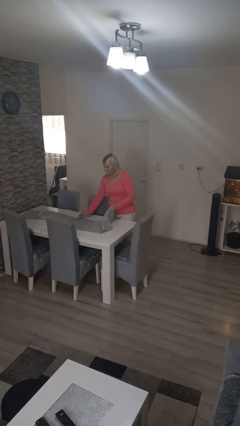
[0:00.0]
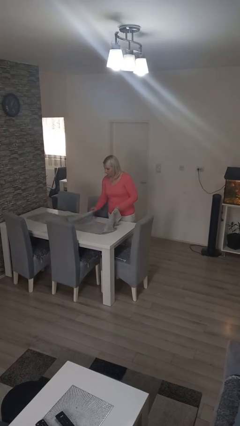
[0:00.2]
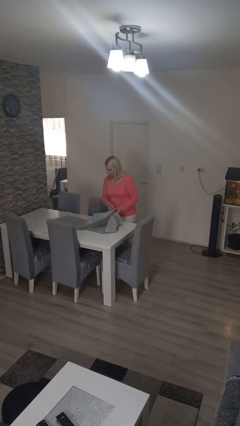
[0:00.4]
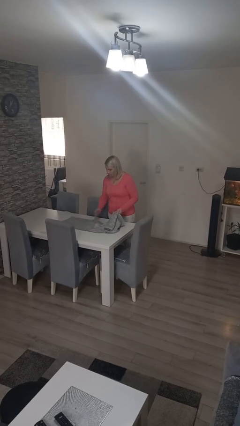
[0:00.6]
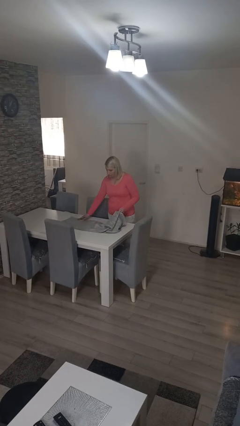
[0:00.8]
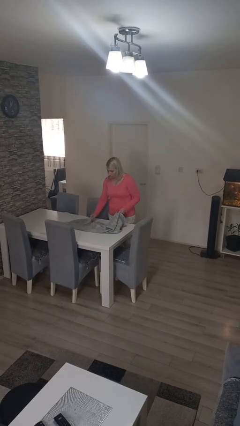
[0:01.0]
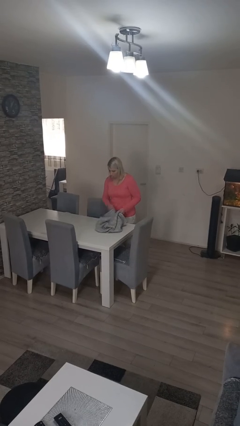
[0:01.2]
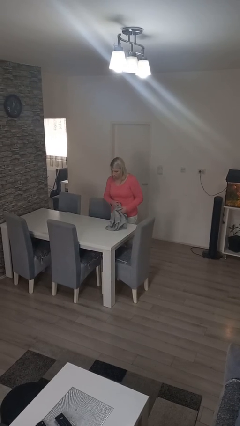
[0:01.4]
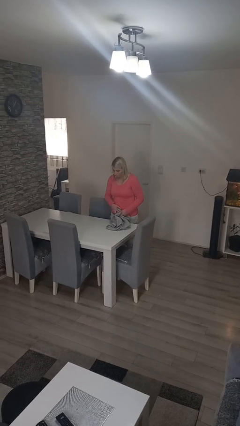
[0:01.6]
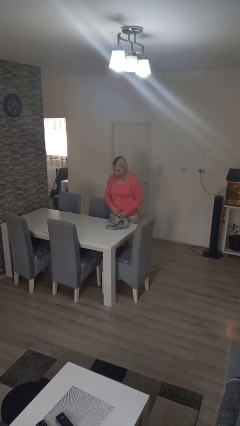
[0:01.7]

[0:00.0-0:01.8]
person folds tablecloth

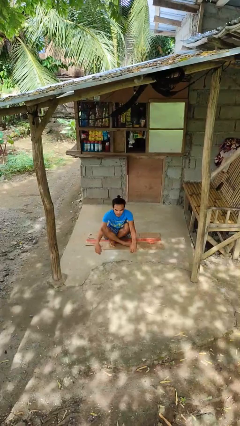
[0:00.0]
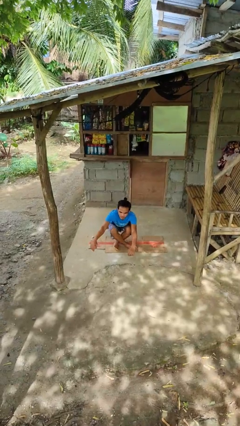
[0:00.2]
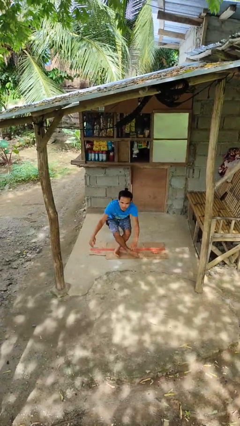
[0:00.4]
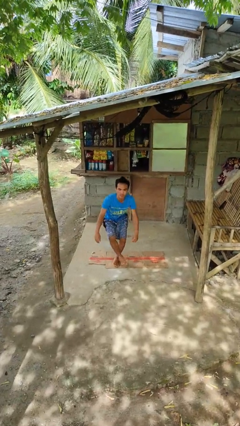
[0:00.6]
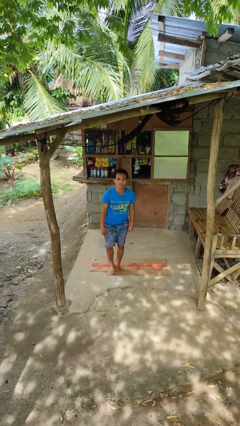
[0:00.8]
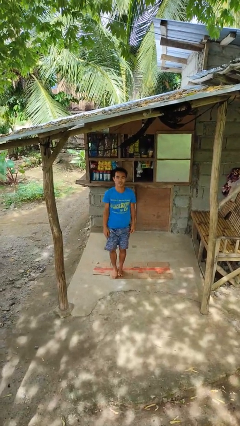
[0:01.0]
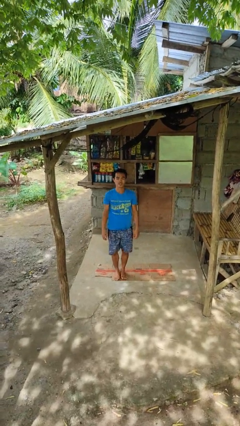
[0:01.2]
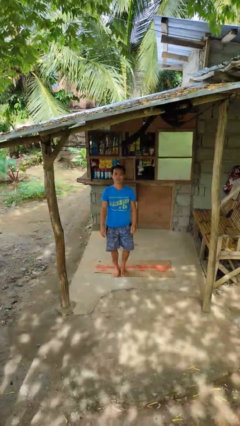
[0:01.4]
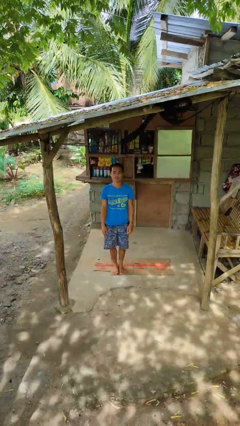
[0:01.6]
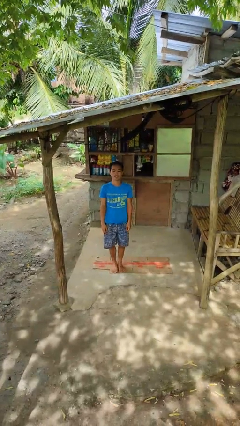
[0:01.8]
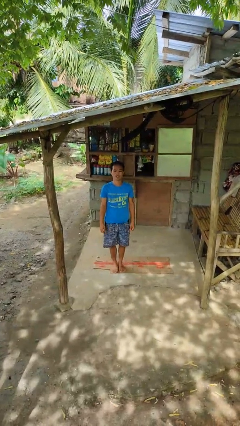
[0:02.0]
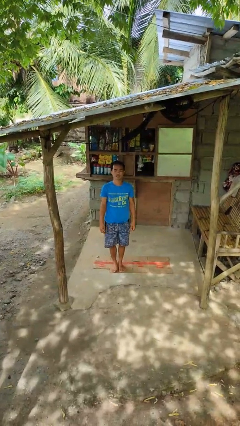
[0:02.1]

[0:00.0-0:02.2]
person stands up from floor

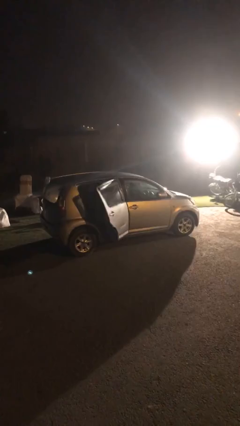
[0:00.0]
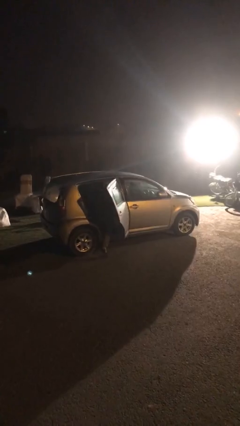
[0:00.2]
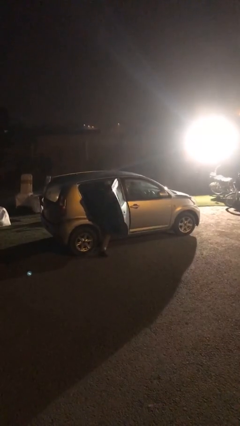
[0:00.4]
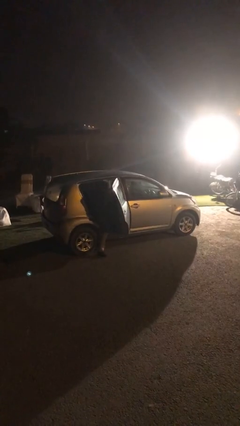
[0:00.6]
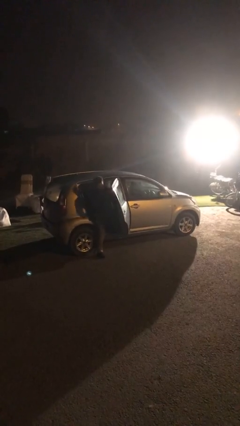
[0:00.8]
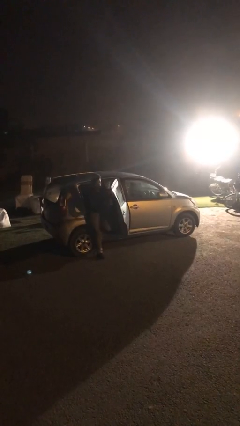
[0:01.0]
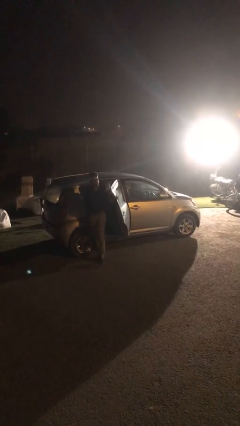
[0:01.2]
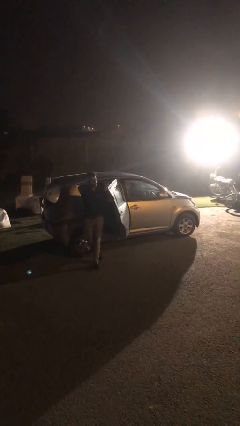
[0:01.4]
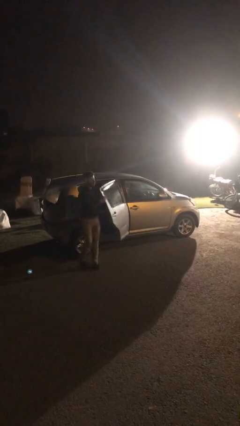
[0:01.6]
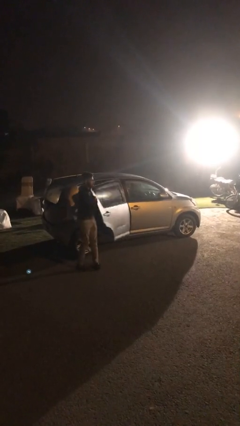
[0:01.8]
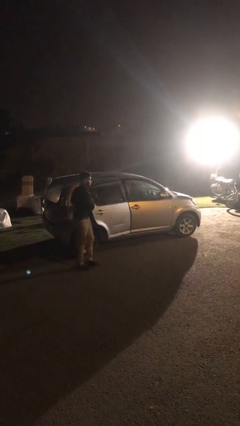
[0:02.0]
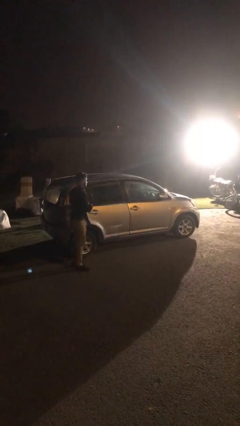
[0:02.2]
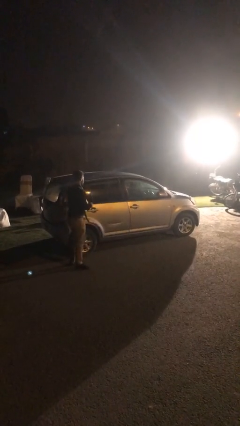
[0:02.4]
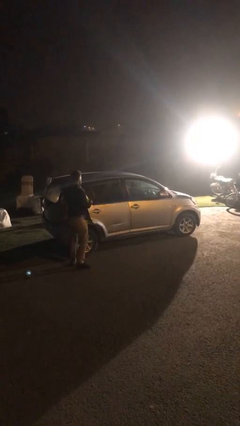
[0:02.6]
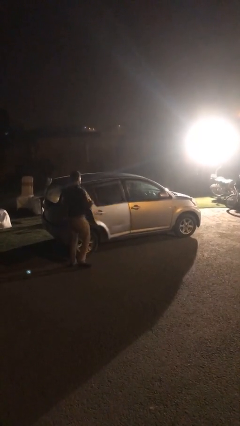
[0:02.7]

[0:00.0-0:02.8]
car drops off person

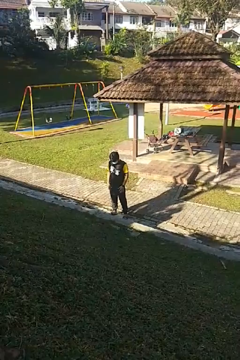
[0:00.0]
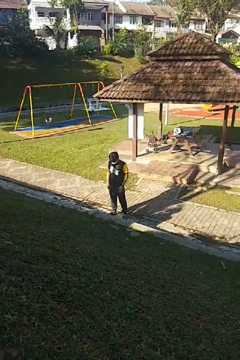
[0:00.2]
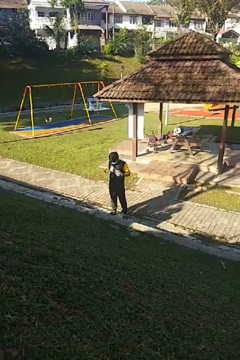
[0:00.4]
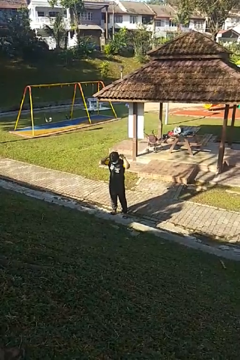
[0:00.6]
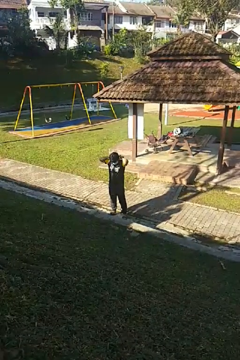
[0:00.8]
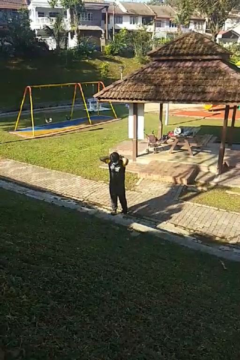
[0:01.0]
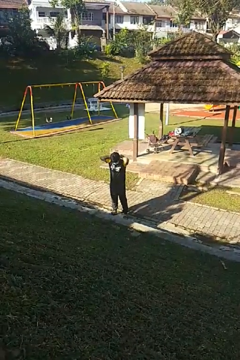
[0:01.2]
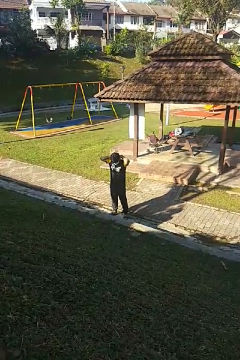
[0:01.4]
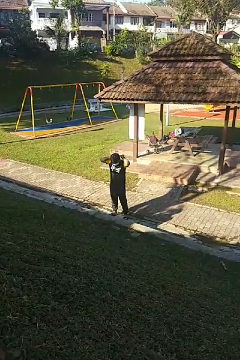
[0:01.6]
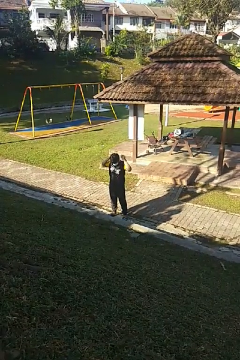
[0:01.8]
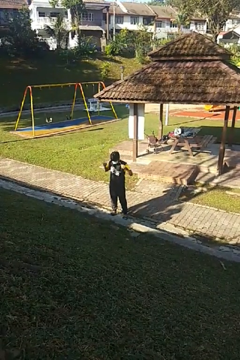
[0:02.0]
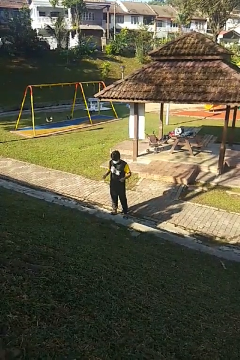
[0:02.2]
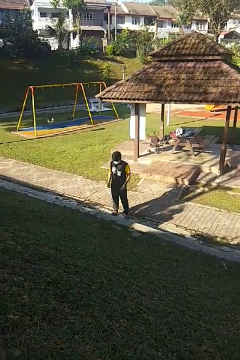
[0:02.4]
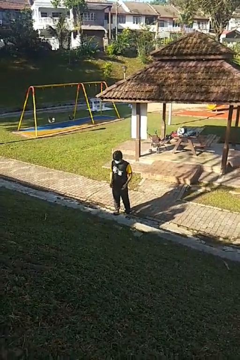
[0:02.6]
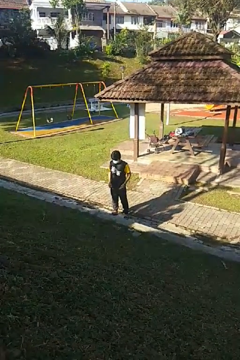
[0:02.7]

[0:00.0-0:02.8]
person takes off necklace

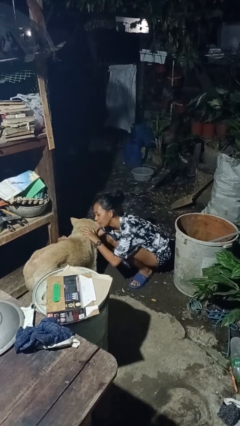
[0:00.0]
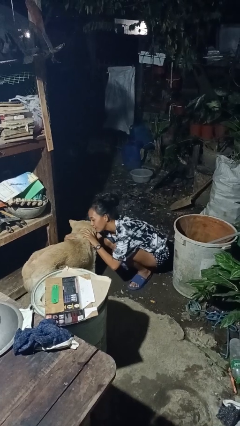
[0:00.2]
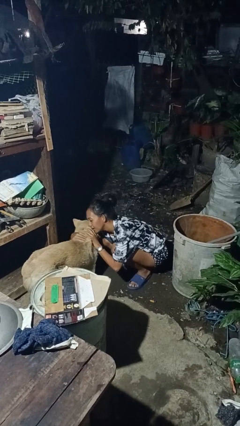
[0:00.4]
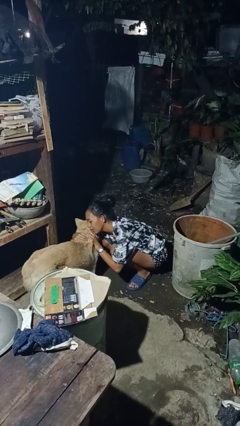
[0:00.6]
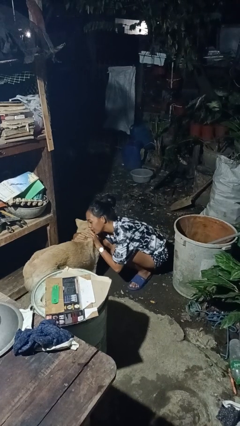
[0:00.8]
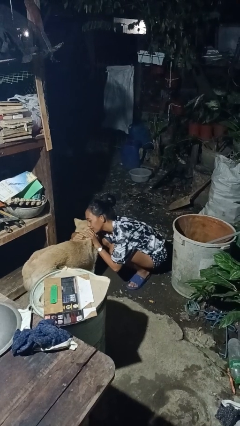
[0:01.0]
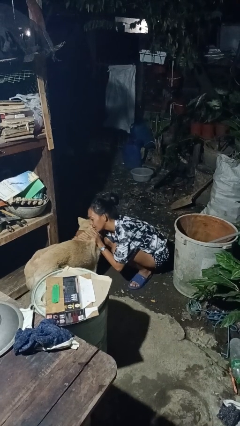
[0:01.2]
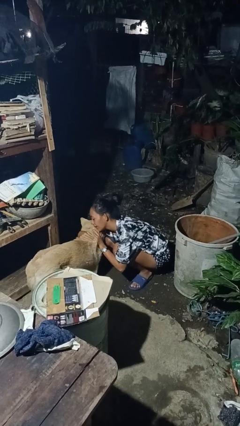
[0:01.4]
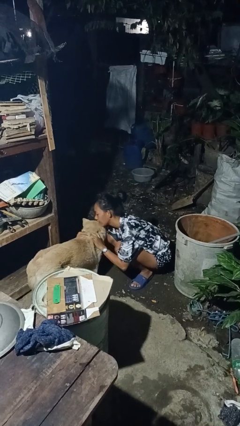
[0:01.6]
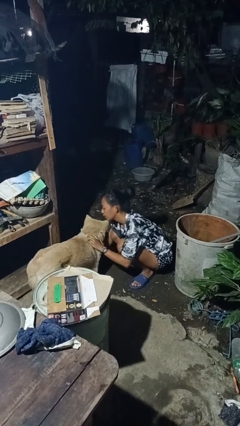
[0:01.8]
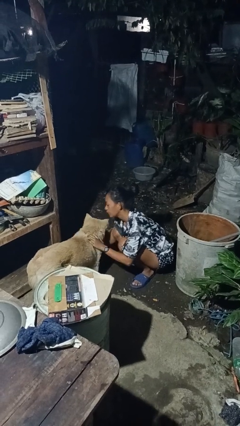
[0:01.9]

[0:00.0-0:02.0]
person hugs dog

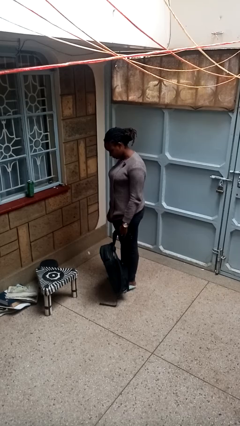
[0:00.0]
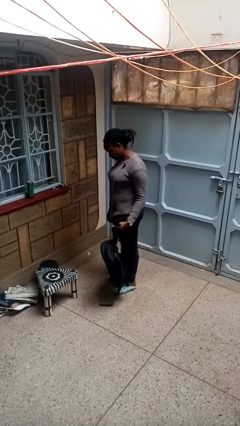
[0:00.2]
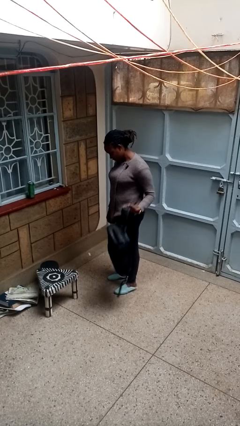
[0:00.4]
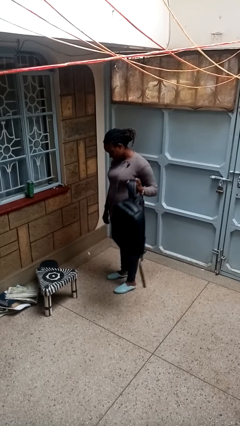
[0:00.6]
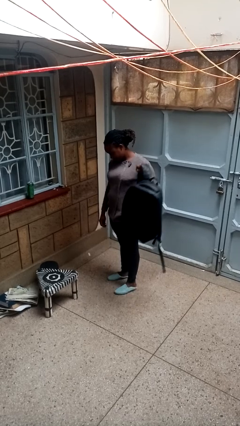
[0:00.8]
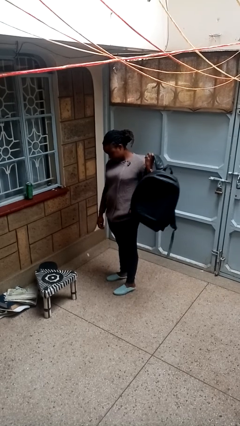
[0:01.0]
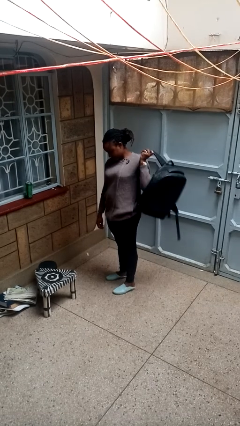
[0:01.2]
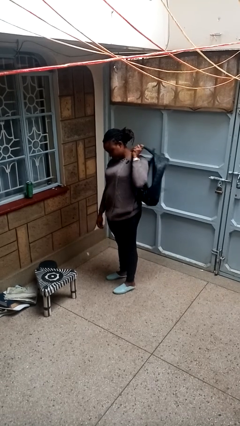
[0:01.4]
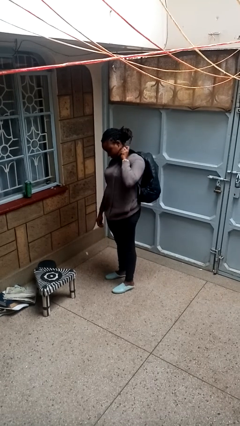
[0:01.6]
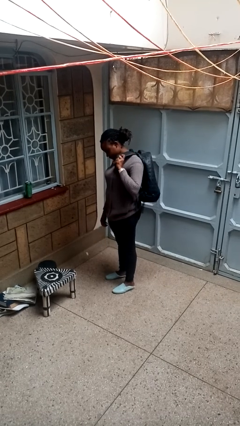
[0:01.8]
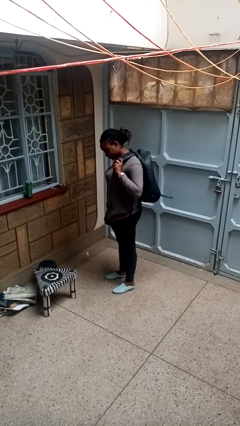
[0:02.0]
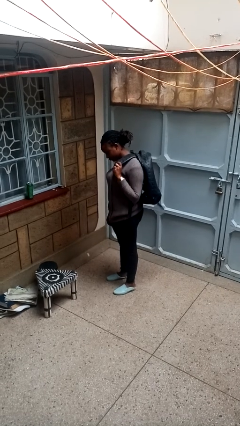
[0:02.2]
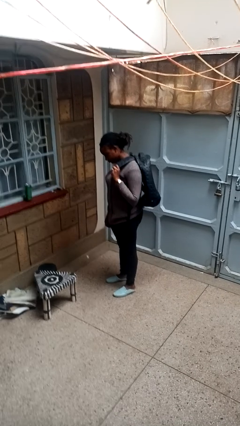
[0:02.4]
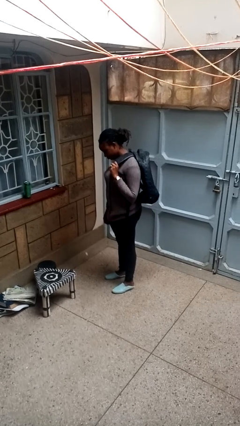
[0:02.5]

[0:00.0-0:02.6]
person puts on backpack

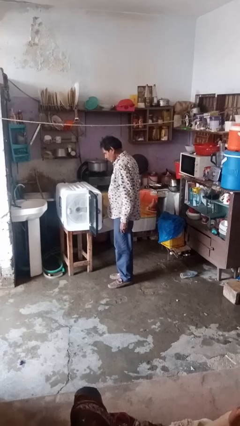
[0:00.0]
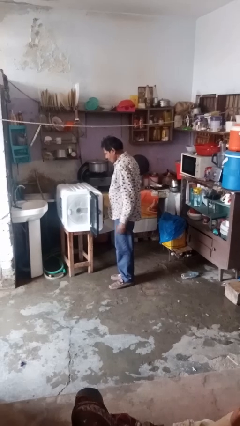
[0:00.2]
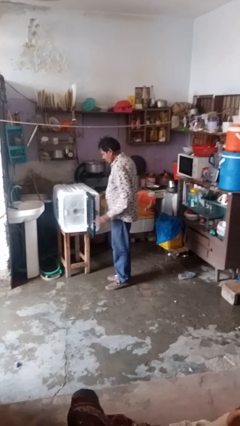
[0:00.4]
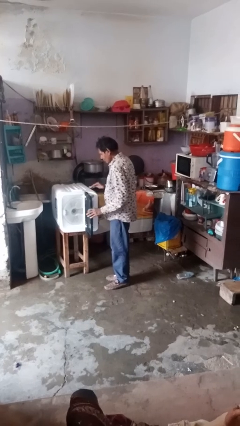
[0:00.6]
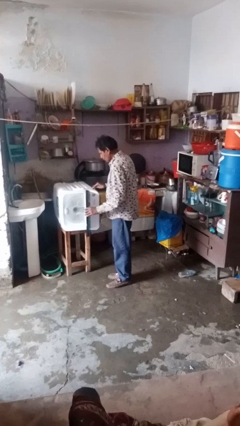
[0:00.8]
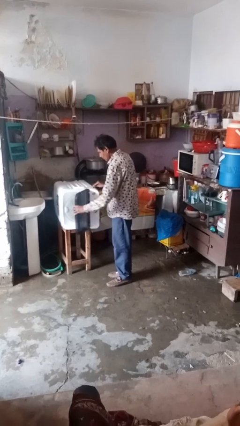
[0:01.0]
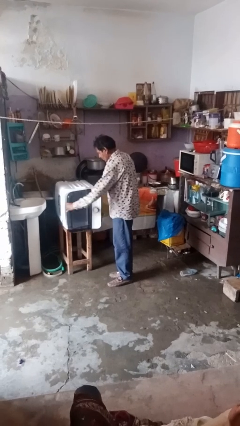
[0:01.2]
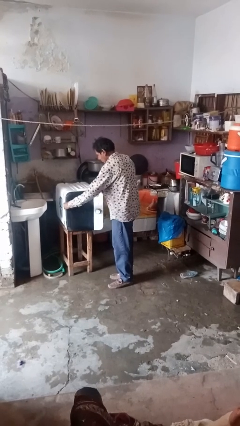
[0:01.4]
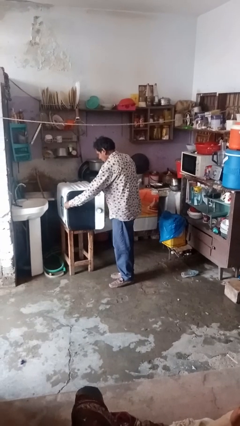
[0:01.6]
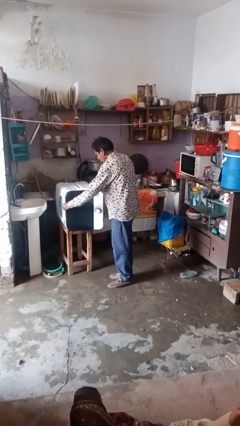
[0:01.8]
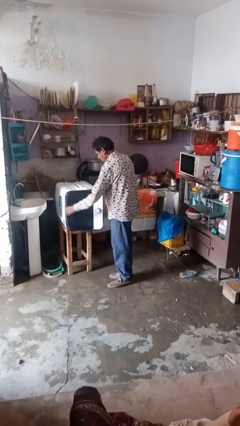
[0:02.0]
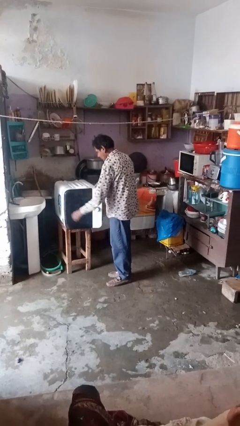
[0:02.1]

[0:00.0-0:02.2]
person closes dishwasher

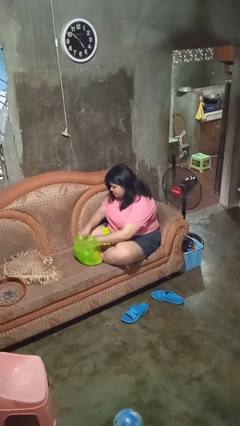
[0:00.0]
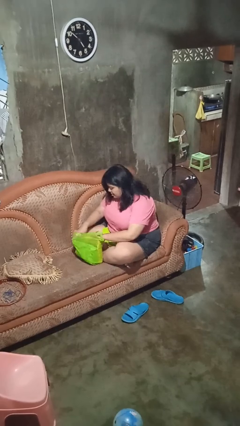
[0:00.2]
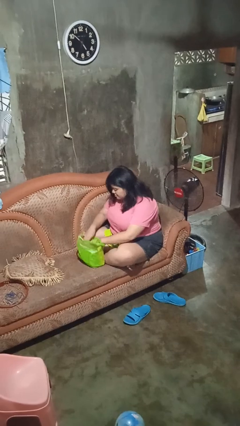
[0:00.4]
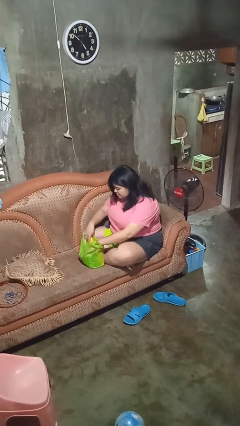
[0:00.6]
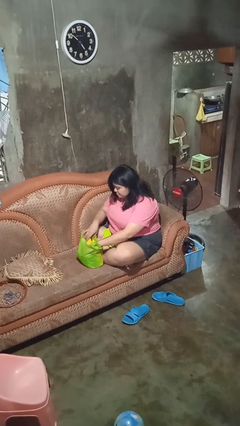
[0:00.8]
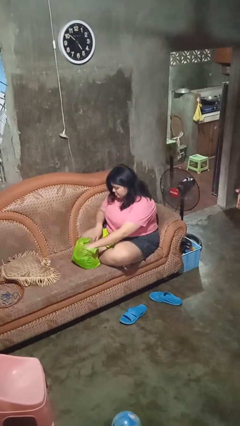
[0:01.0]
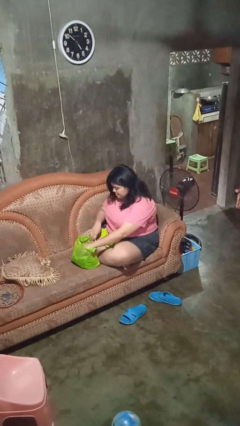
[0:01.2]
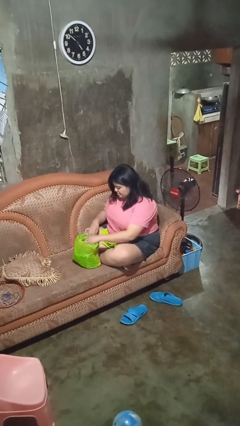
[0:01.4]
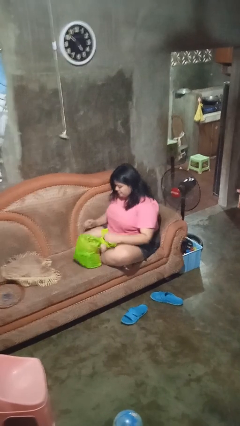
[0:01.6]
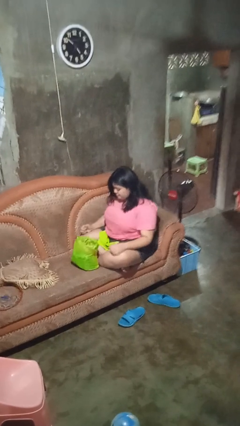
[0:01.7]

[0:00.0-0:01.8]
person searches in bag
